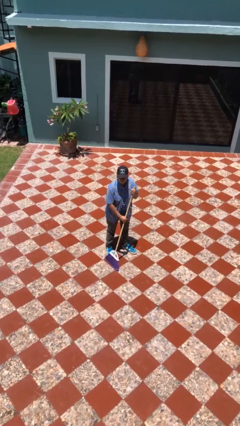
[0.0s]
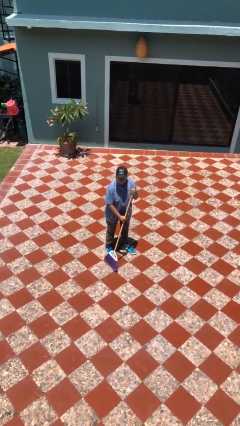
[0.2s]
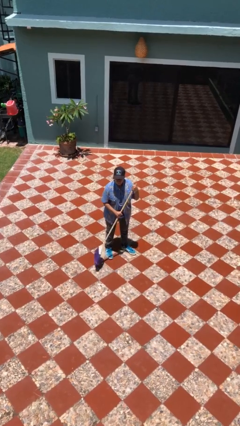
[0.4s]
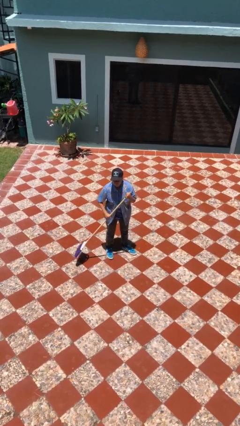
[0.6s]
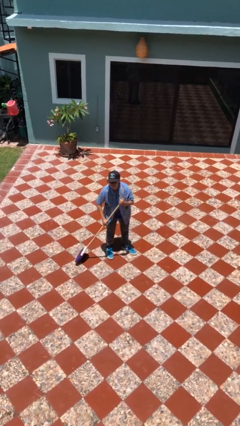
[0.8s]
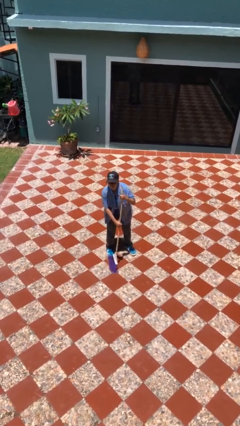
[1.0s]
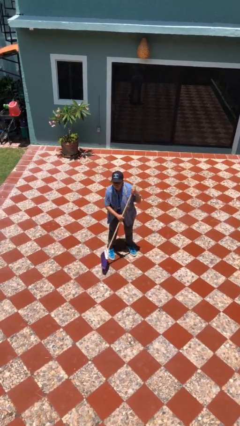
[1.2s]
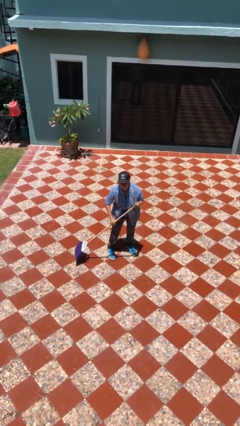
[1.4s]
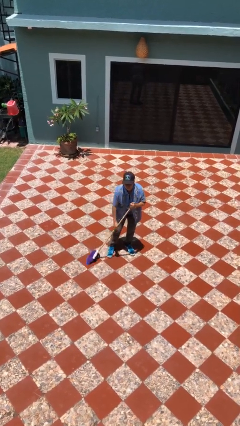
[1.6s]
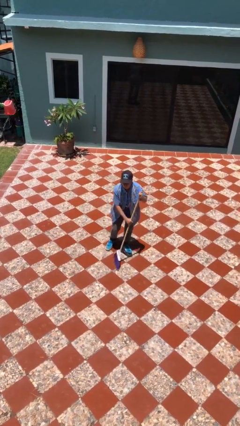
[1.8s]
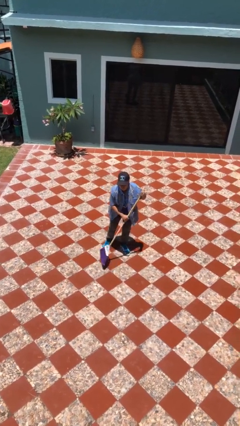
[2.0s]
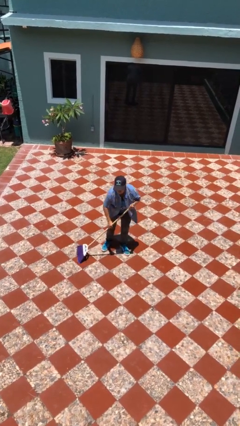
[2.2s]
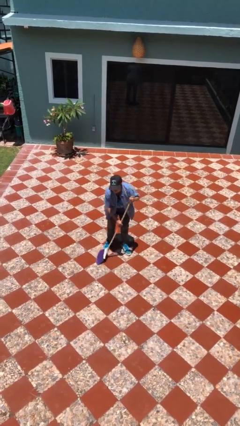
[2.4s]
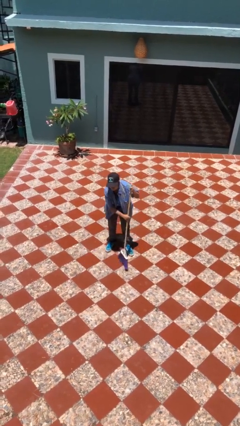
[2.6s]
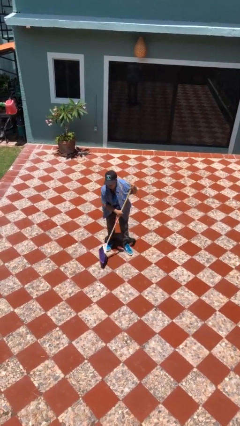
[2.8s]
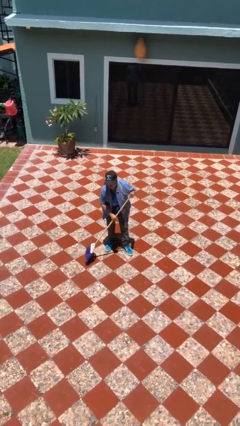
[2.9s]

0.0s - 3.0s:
person sweeps floor

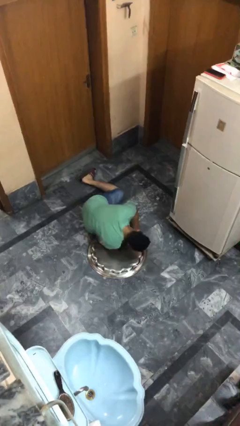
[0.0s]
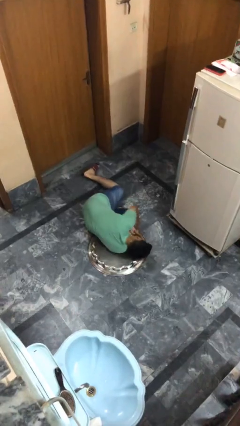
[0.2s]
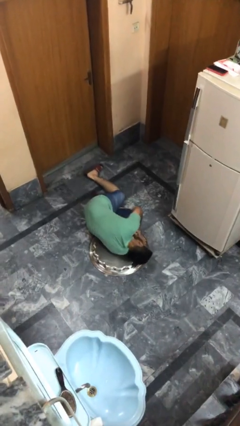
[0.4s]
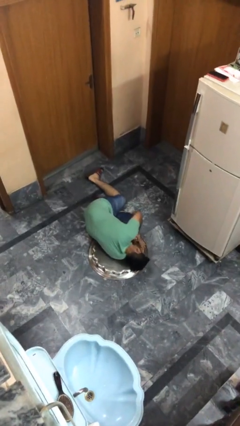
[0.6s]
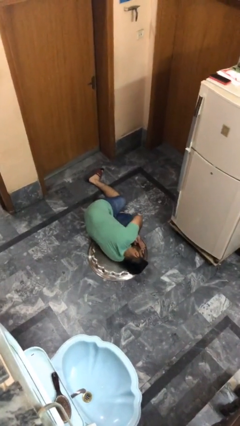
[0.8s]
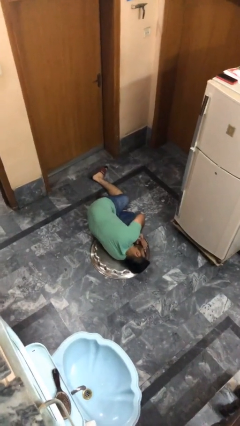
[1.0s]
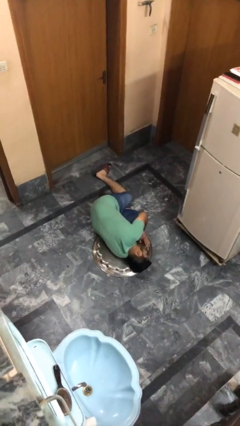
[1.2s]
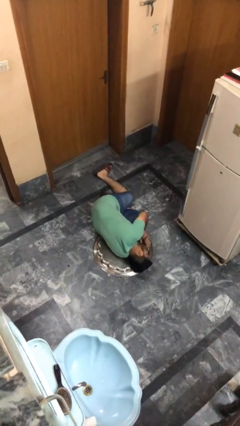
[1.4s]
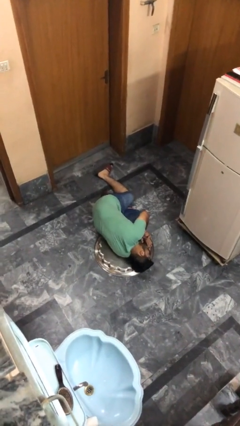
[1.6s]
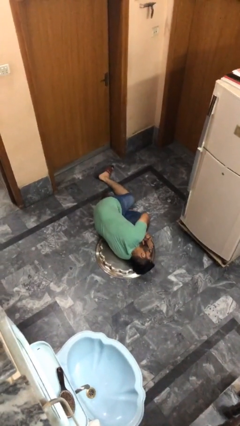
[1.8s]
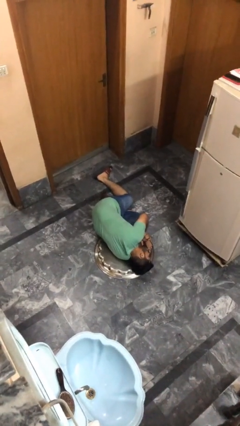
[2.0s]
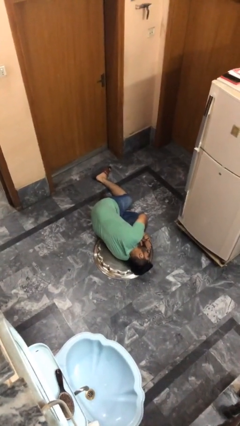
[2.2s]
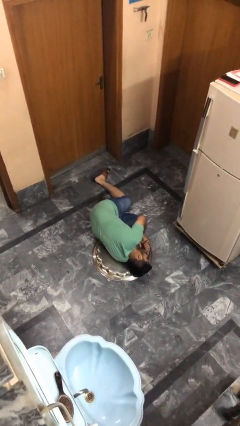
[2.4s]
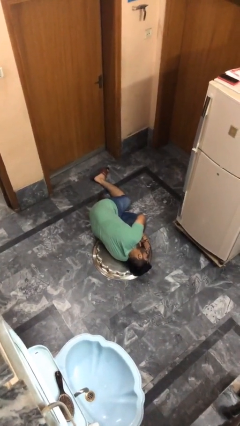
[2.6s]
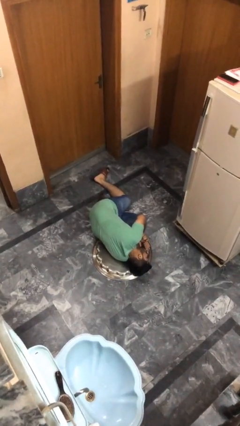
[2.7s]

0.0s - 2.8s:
person lies down on floor

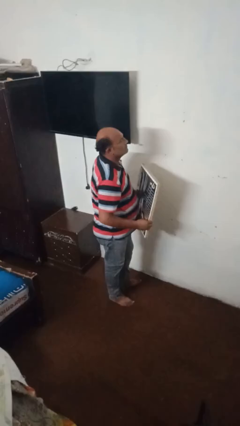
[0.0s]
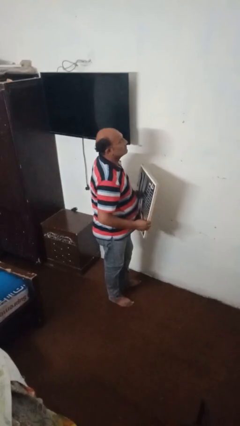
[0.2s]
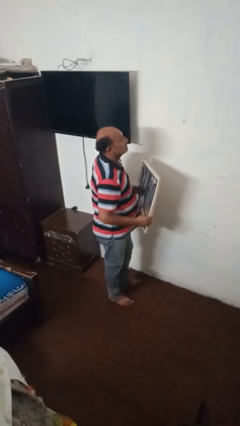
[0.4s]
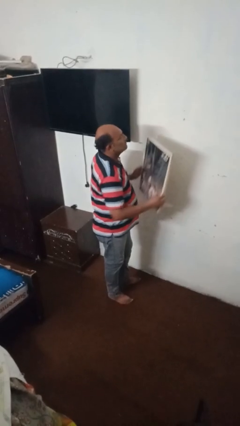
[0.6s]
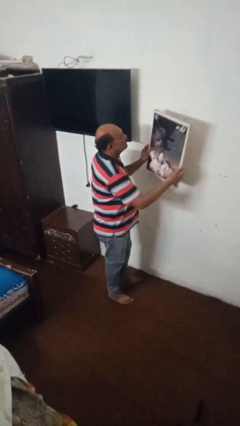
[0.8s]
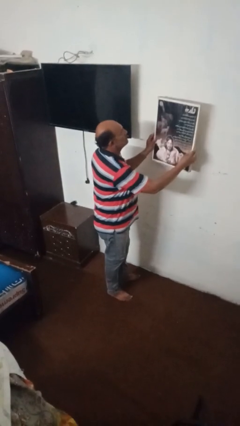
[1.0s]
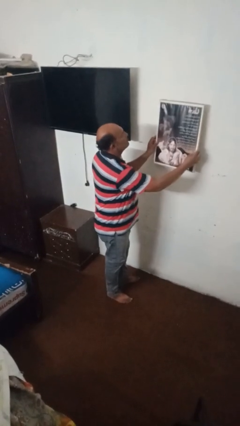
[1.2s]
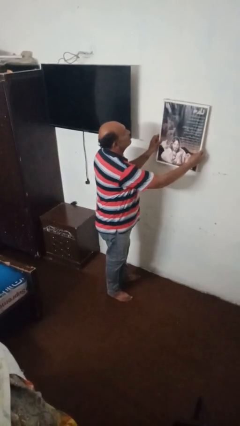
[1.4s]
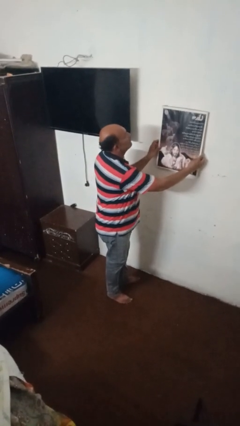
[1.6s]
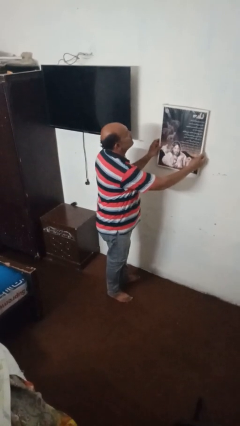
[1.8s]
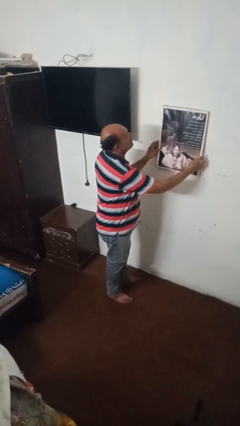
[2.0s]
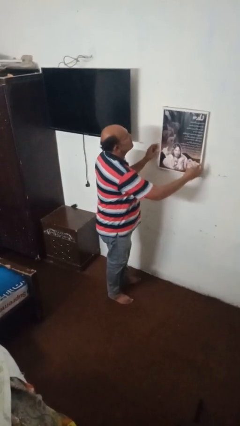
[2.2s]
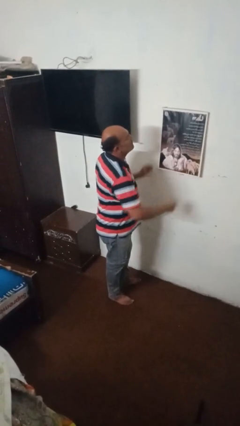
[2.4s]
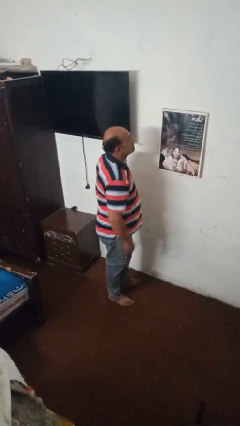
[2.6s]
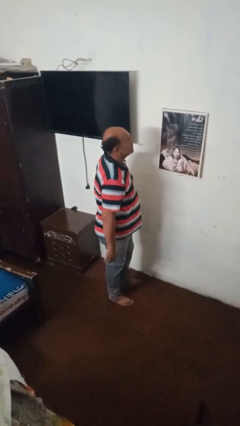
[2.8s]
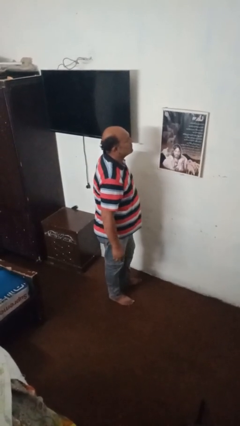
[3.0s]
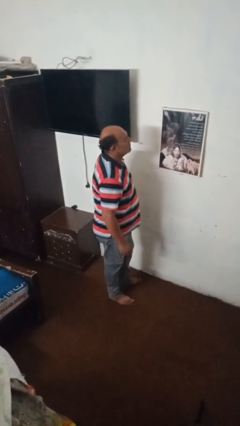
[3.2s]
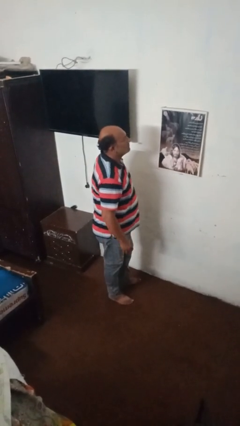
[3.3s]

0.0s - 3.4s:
person puts up picture frame

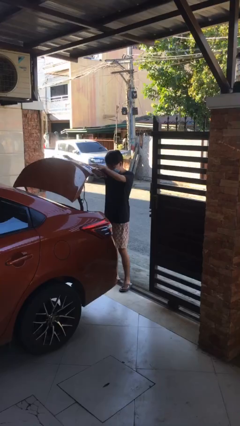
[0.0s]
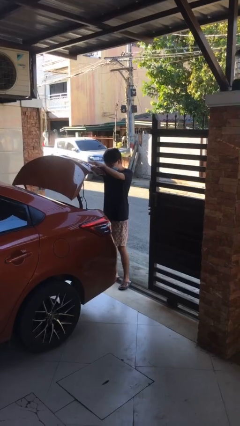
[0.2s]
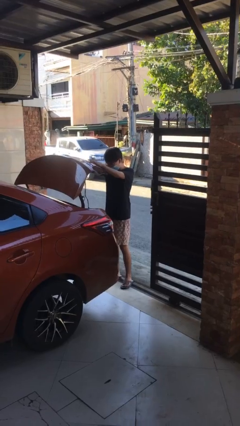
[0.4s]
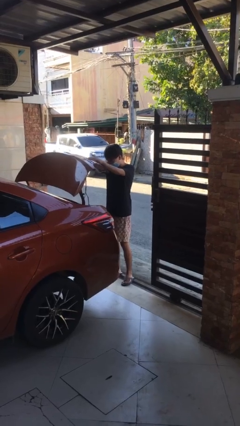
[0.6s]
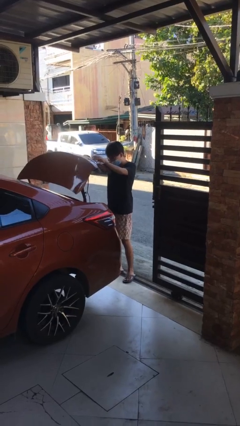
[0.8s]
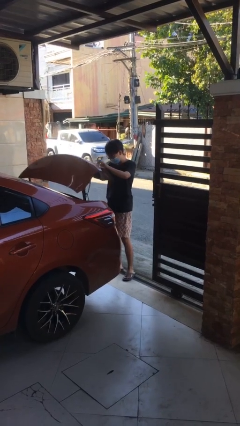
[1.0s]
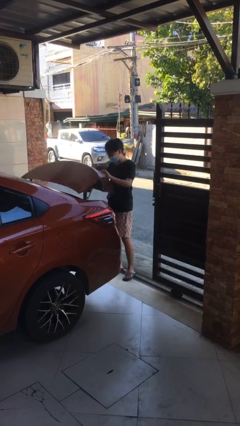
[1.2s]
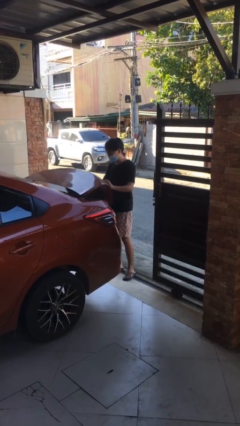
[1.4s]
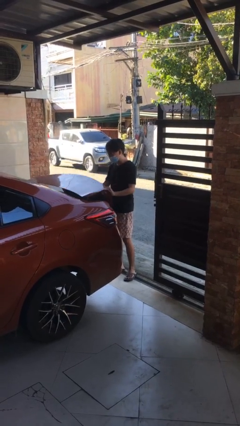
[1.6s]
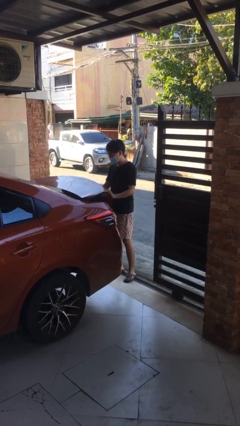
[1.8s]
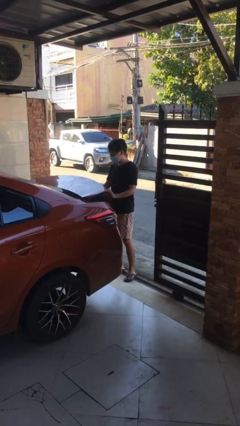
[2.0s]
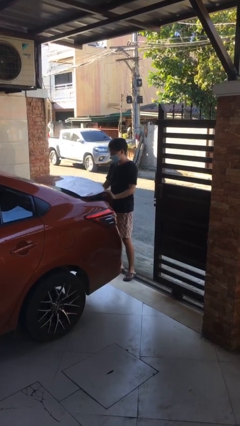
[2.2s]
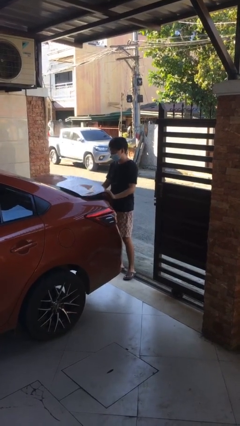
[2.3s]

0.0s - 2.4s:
person closes car trunk

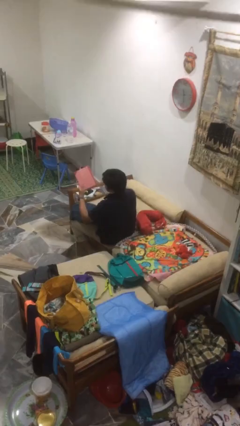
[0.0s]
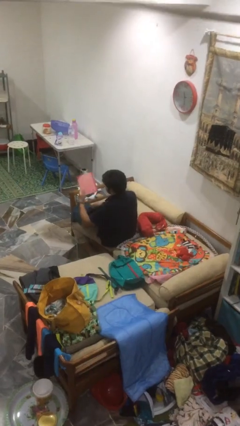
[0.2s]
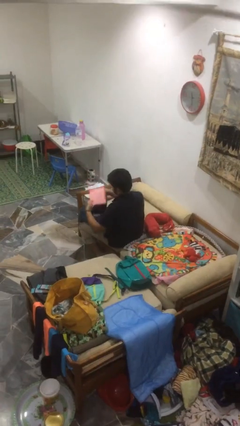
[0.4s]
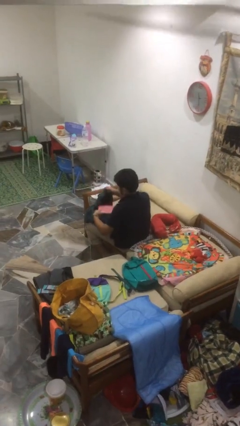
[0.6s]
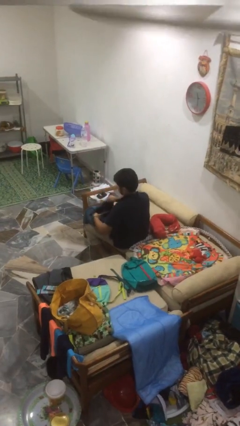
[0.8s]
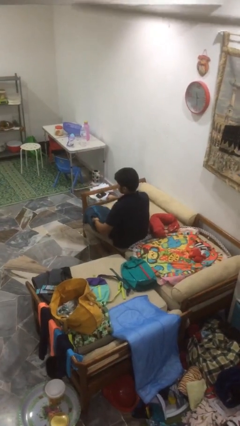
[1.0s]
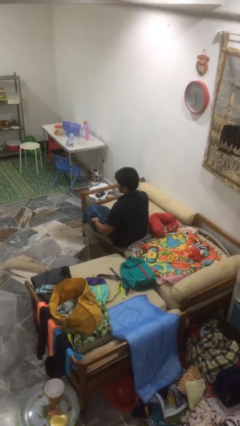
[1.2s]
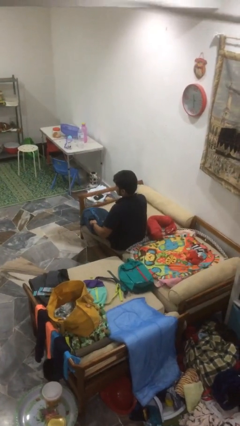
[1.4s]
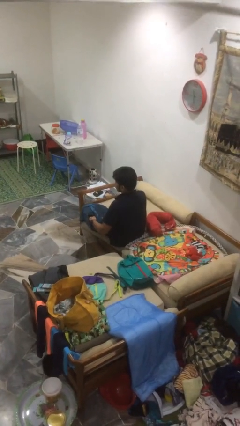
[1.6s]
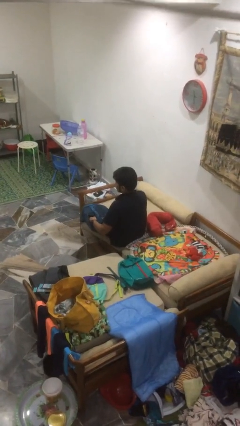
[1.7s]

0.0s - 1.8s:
person puts object into bag

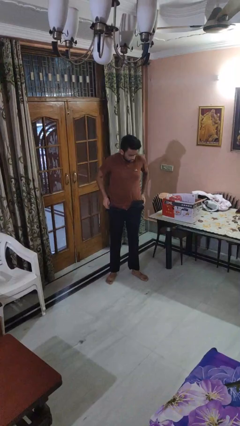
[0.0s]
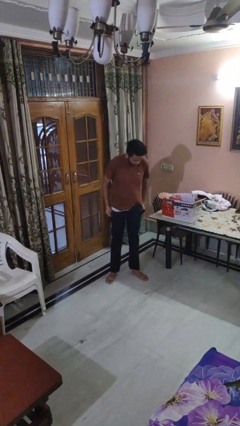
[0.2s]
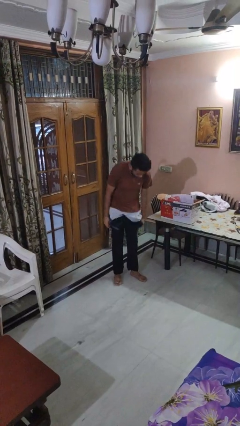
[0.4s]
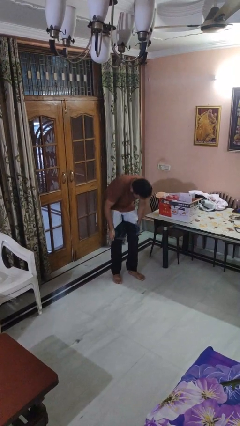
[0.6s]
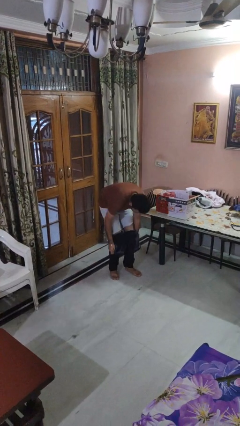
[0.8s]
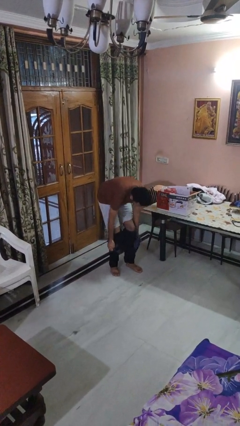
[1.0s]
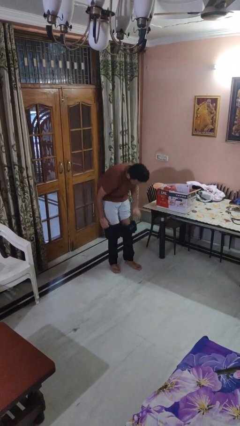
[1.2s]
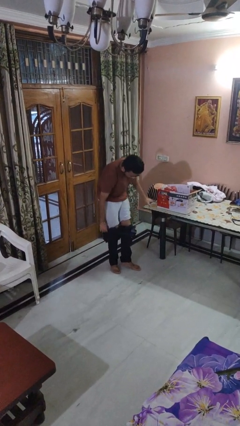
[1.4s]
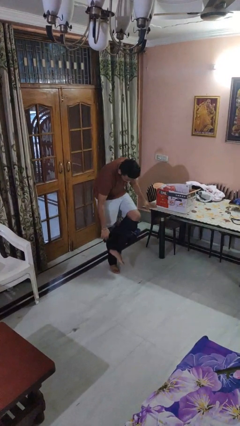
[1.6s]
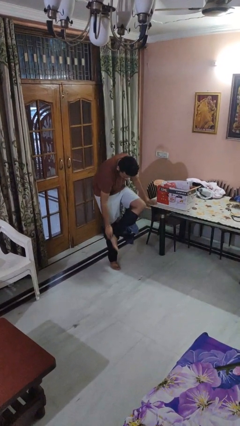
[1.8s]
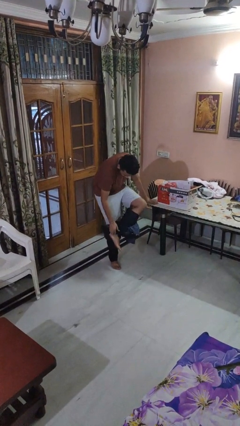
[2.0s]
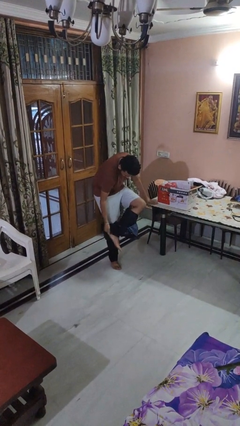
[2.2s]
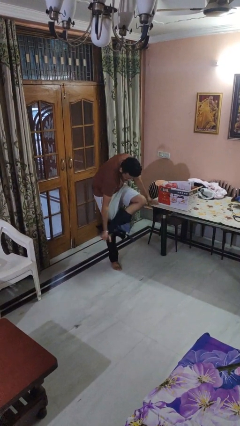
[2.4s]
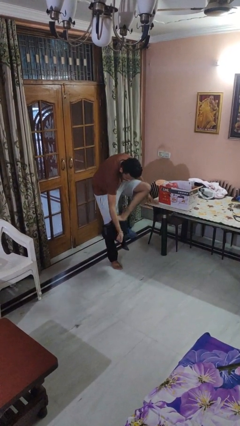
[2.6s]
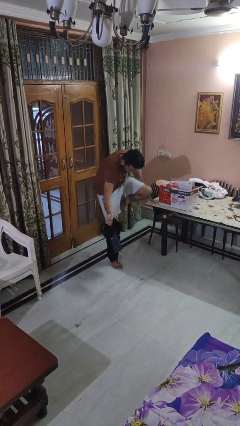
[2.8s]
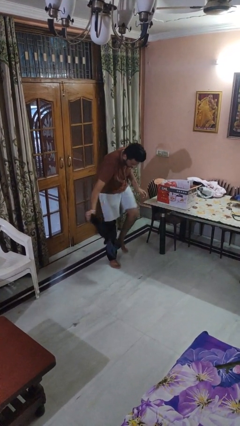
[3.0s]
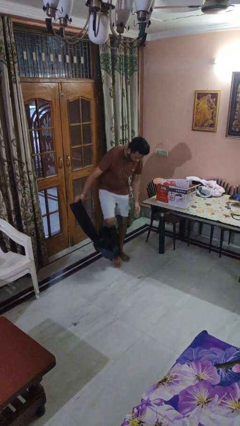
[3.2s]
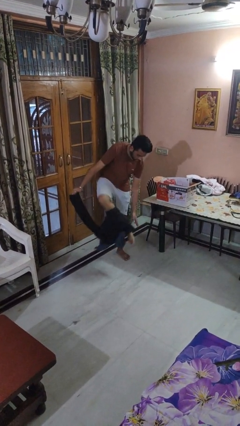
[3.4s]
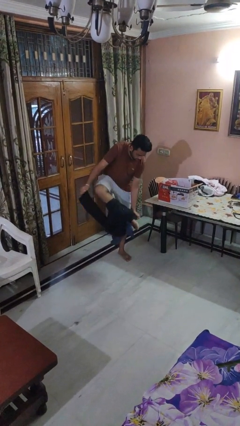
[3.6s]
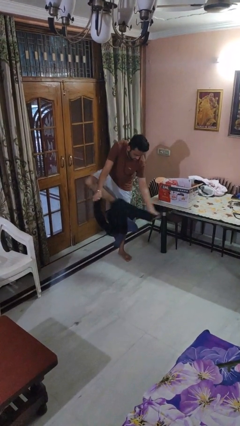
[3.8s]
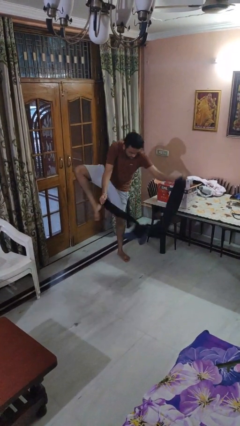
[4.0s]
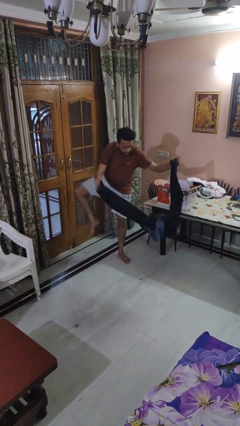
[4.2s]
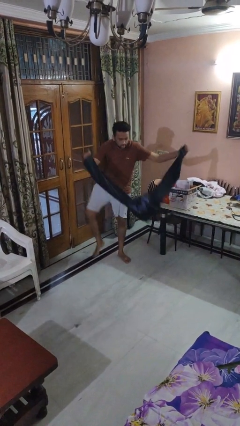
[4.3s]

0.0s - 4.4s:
person takes off pants
